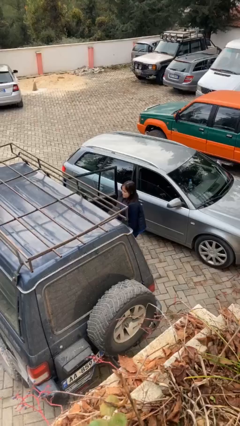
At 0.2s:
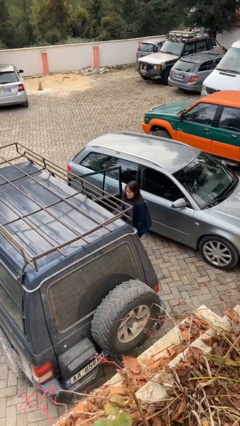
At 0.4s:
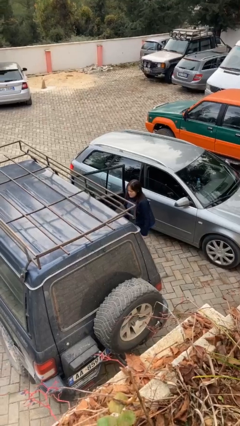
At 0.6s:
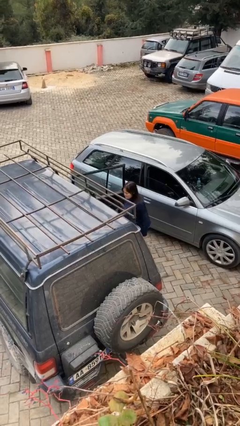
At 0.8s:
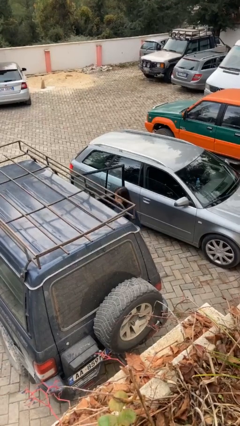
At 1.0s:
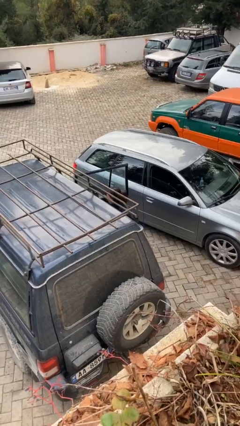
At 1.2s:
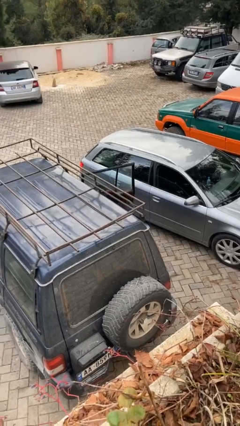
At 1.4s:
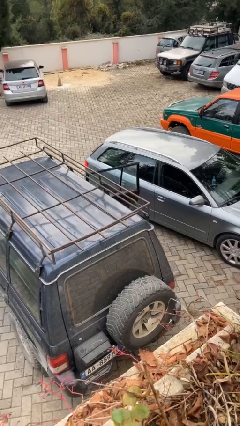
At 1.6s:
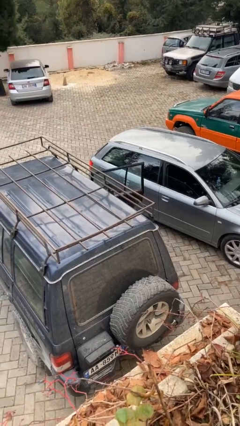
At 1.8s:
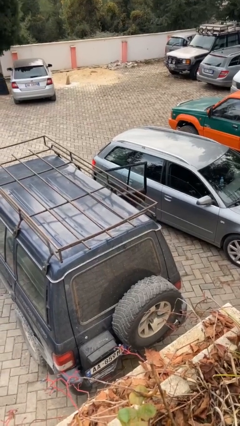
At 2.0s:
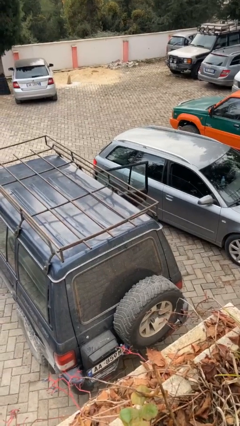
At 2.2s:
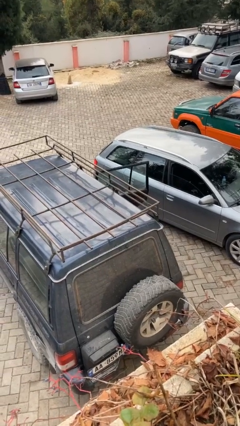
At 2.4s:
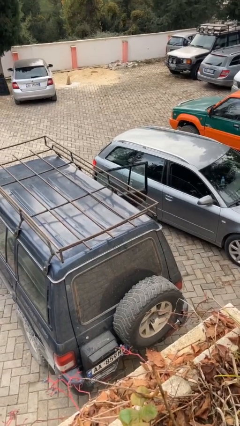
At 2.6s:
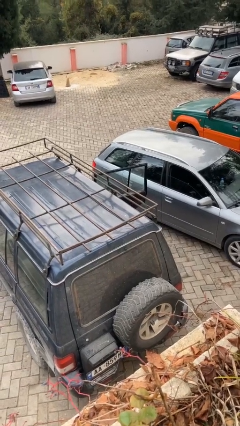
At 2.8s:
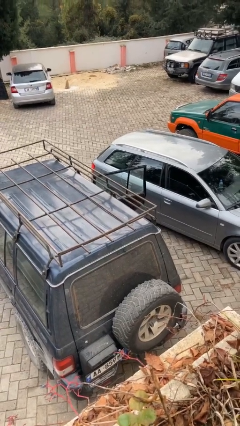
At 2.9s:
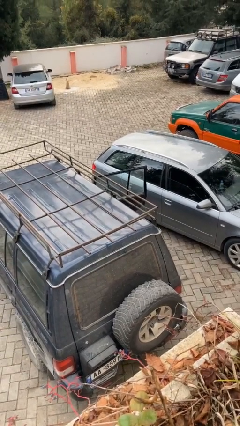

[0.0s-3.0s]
person enters car

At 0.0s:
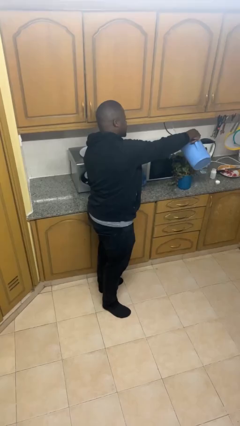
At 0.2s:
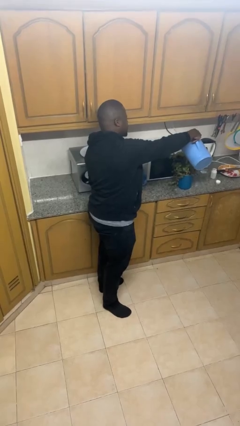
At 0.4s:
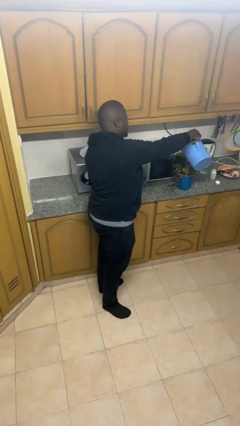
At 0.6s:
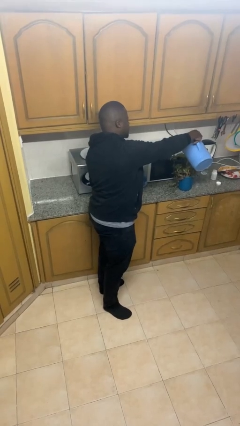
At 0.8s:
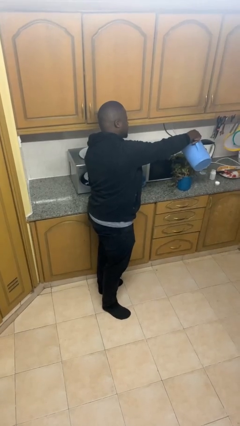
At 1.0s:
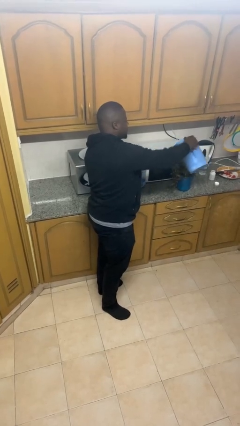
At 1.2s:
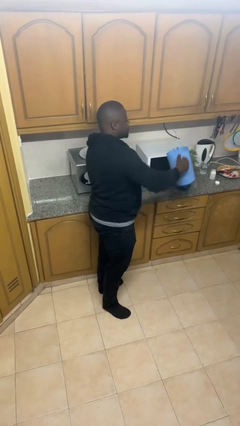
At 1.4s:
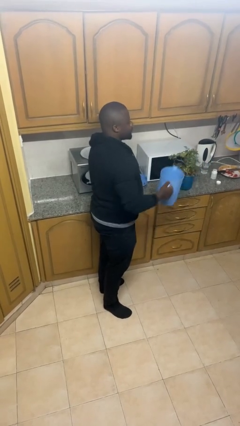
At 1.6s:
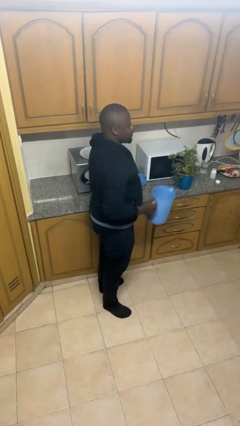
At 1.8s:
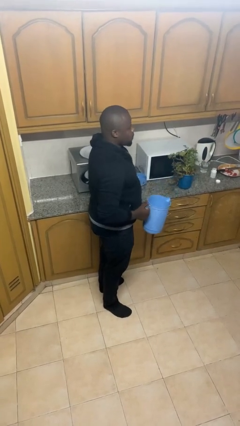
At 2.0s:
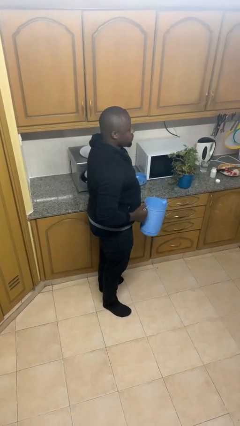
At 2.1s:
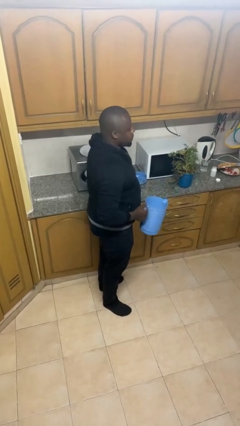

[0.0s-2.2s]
person waters houseplant

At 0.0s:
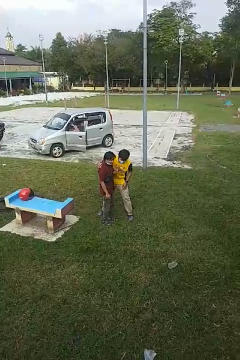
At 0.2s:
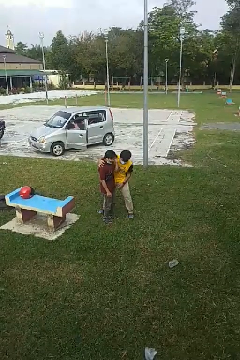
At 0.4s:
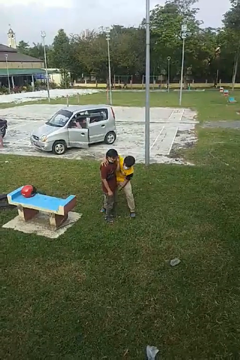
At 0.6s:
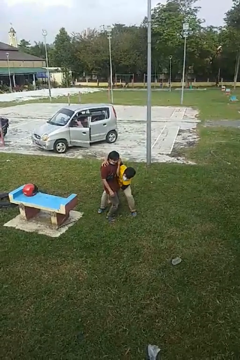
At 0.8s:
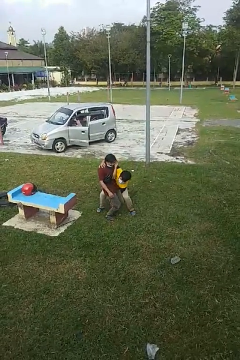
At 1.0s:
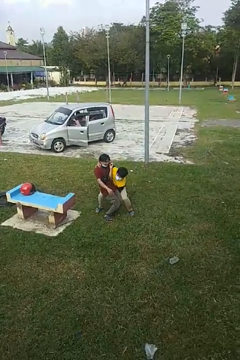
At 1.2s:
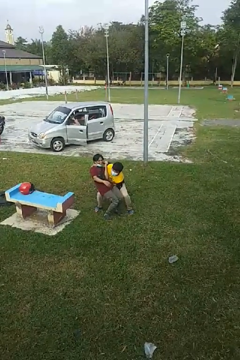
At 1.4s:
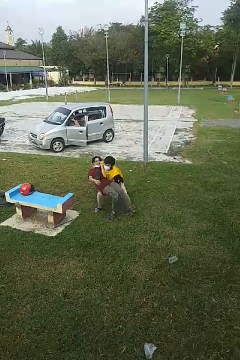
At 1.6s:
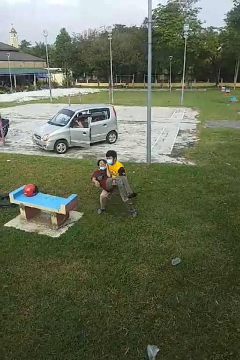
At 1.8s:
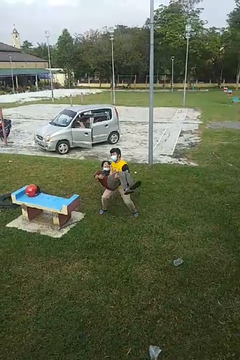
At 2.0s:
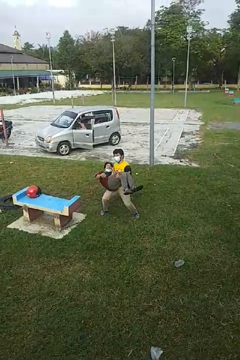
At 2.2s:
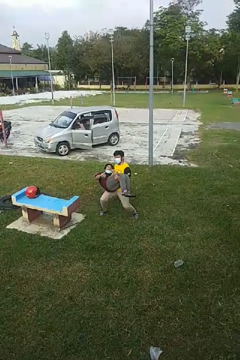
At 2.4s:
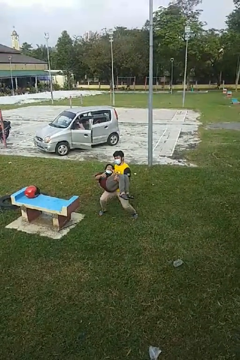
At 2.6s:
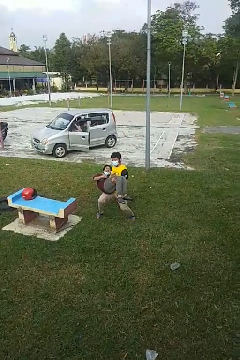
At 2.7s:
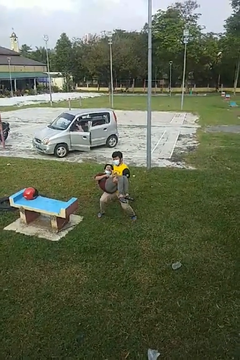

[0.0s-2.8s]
person picks up person

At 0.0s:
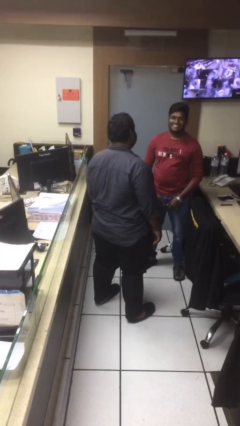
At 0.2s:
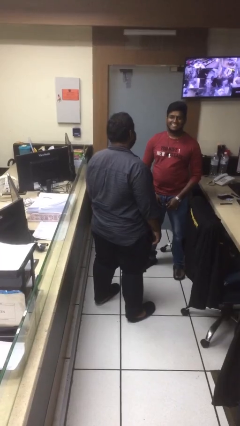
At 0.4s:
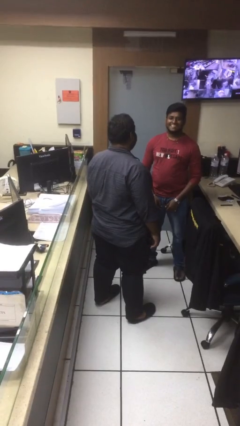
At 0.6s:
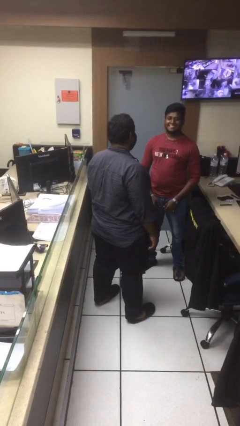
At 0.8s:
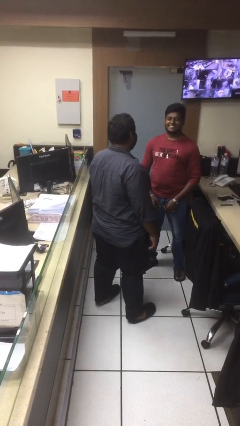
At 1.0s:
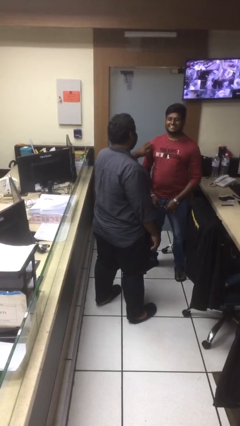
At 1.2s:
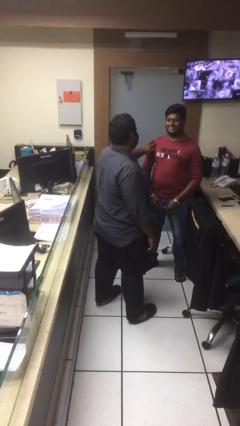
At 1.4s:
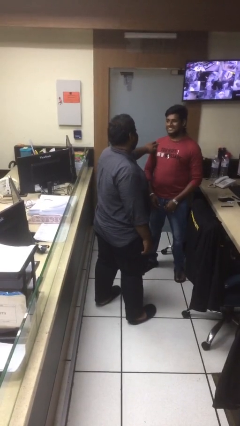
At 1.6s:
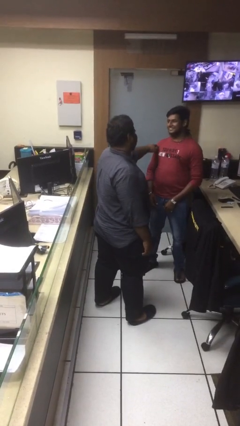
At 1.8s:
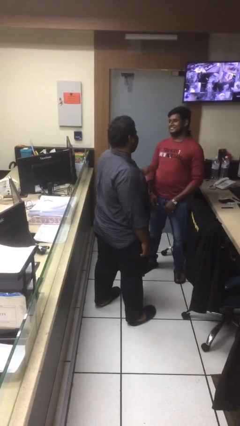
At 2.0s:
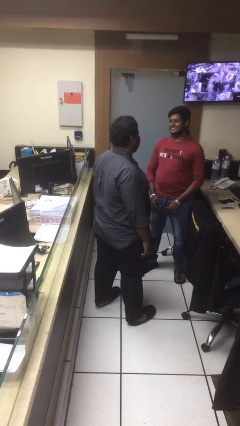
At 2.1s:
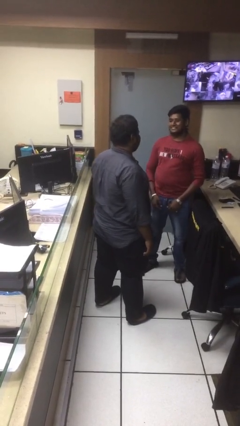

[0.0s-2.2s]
person shoves person

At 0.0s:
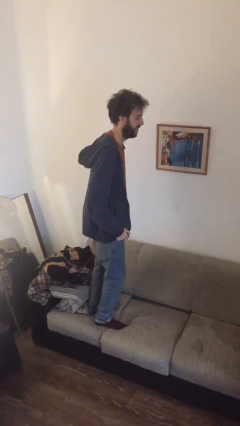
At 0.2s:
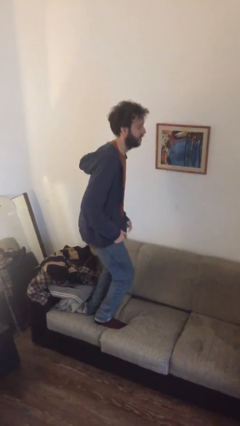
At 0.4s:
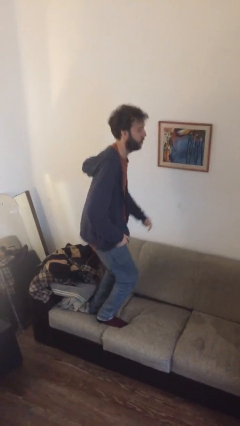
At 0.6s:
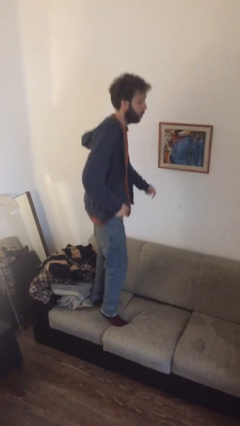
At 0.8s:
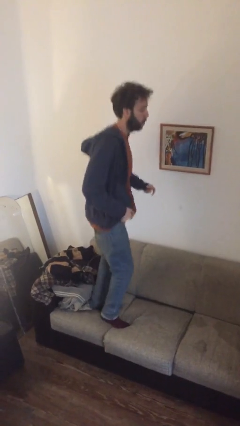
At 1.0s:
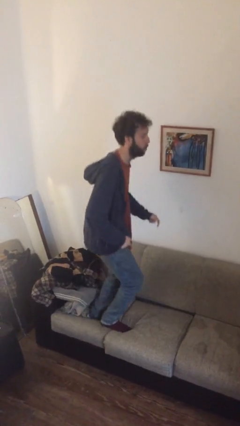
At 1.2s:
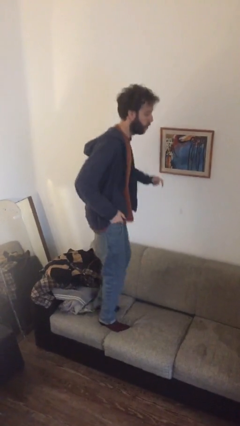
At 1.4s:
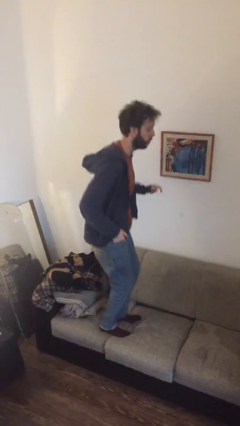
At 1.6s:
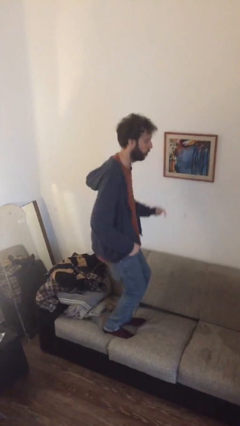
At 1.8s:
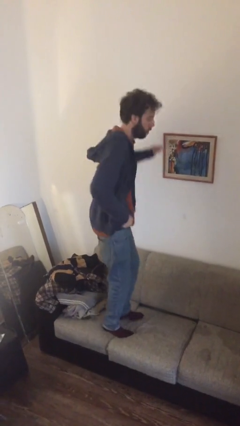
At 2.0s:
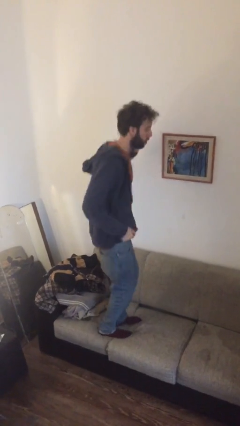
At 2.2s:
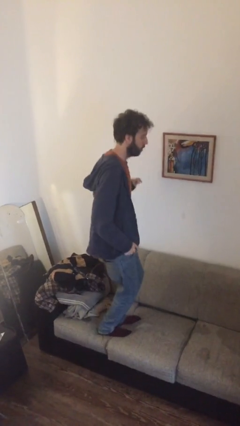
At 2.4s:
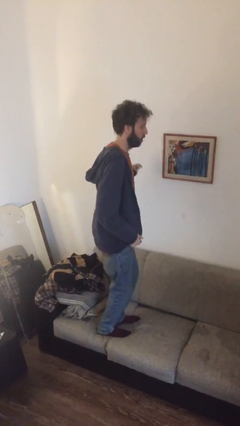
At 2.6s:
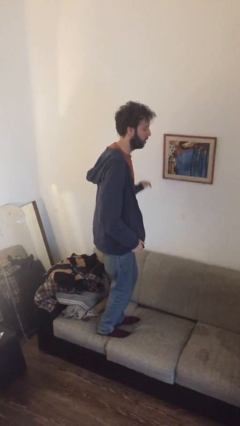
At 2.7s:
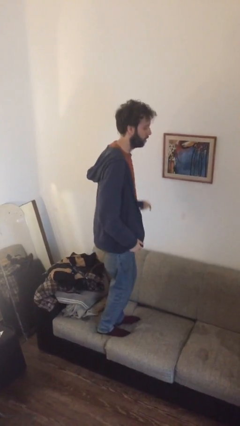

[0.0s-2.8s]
person jumps on couch

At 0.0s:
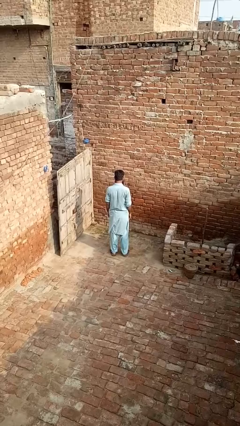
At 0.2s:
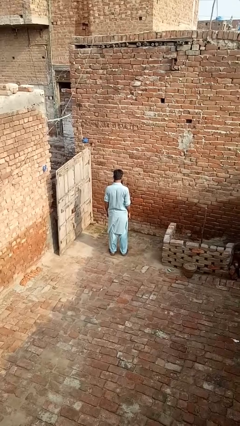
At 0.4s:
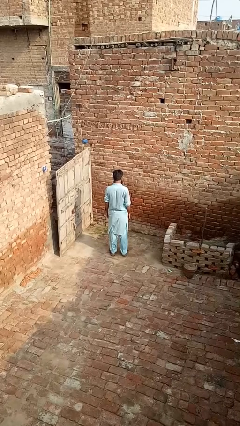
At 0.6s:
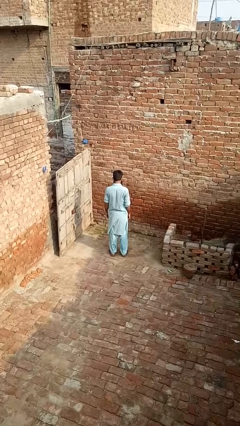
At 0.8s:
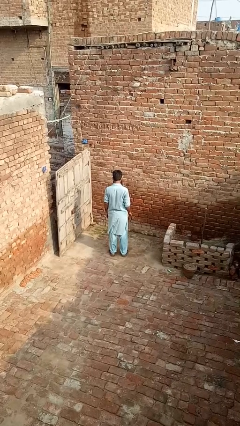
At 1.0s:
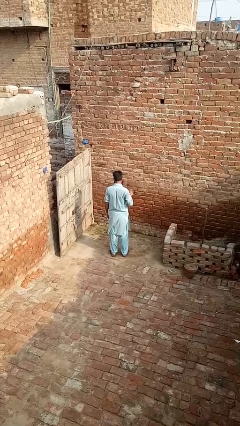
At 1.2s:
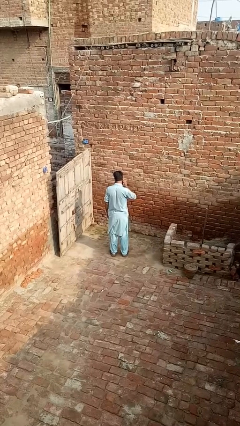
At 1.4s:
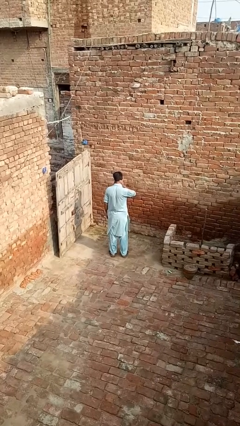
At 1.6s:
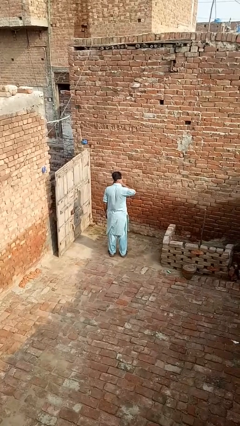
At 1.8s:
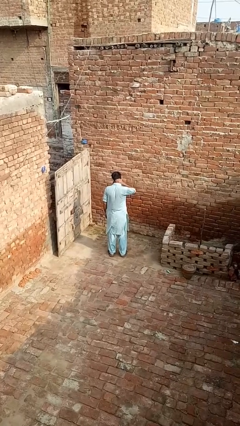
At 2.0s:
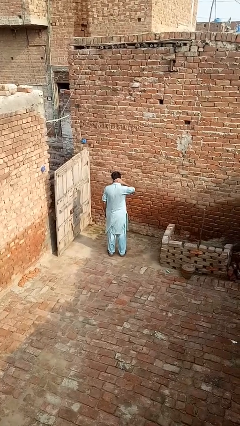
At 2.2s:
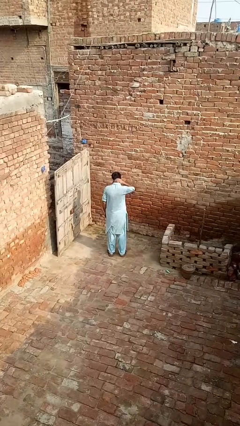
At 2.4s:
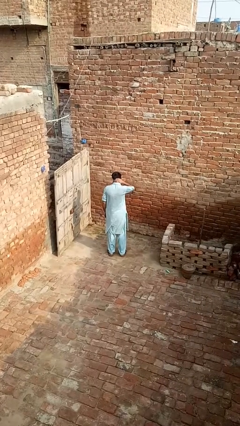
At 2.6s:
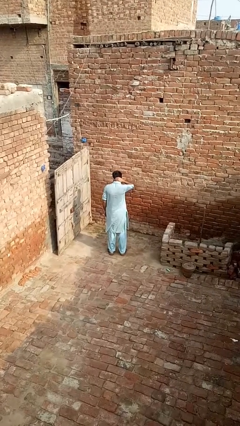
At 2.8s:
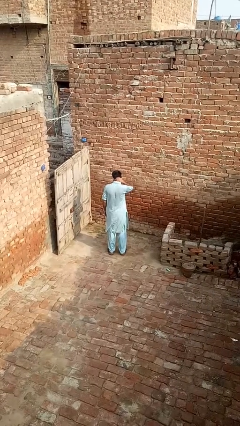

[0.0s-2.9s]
person rubs neck

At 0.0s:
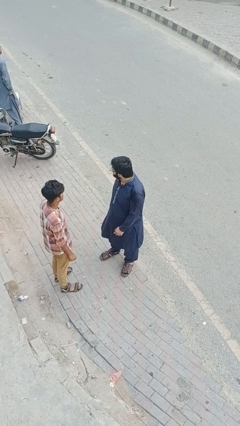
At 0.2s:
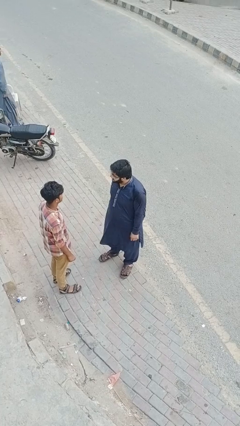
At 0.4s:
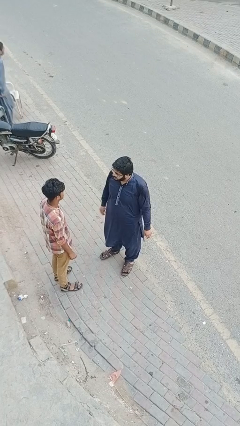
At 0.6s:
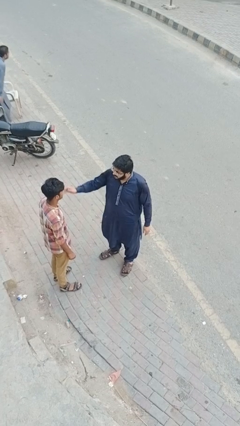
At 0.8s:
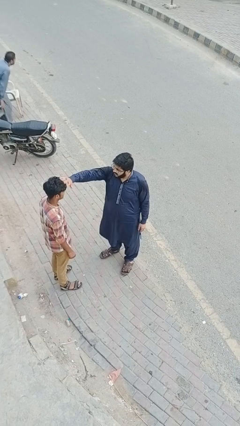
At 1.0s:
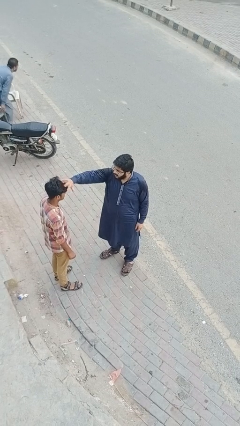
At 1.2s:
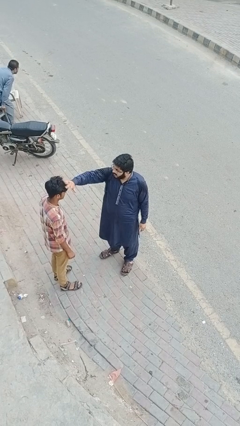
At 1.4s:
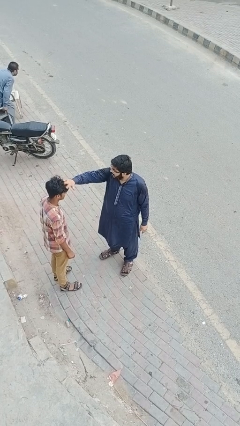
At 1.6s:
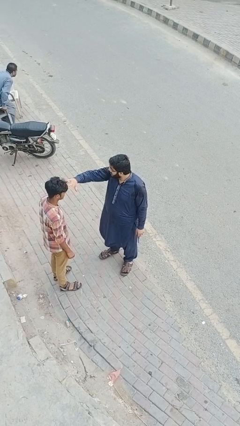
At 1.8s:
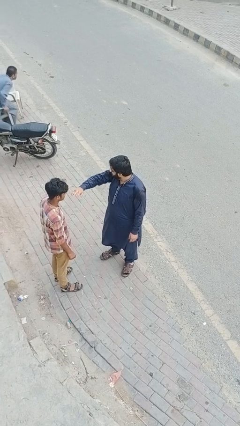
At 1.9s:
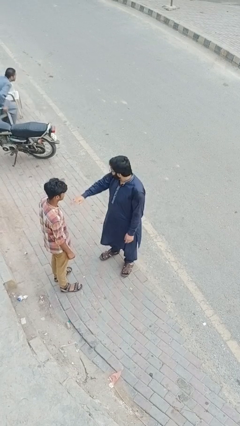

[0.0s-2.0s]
person grabs person by hair

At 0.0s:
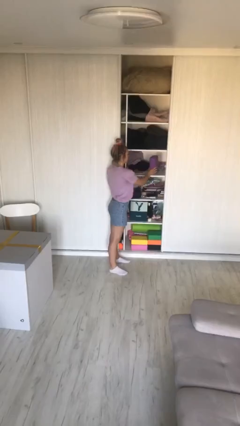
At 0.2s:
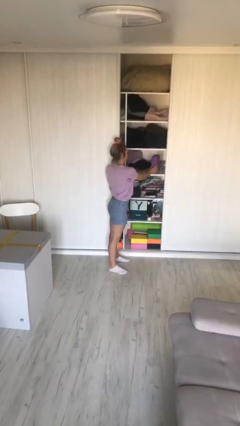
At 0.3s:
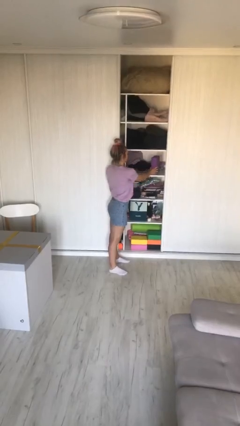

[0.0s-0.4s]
person puts down object into cabinet
